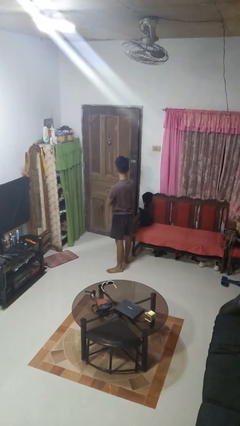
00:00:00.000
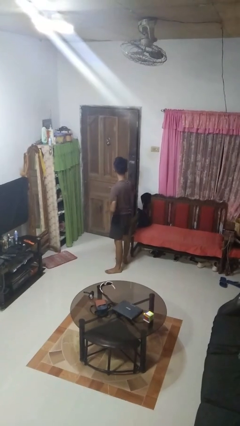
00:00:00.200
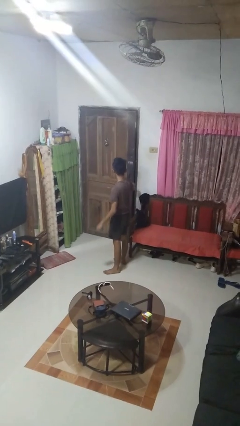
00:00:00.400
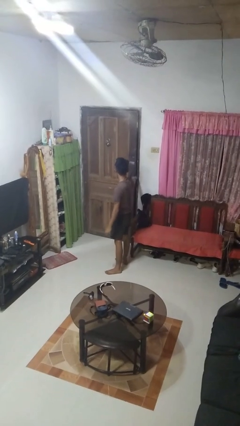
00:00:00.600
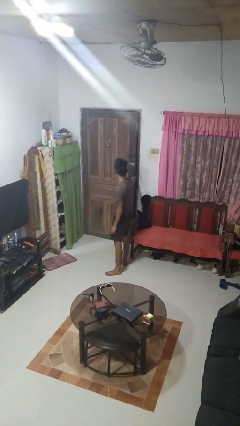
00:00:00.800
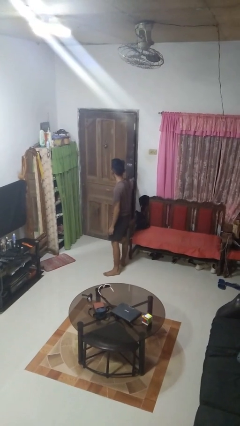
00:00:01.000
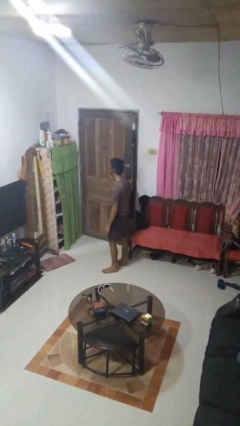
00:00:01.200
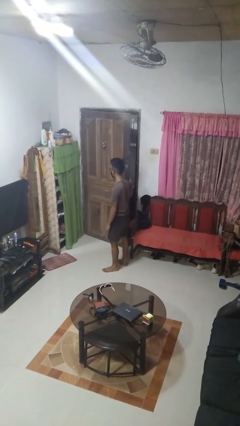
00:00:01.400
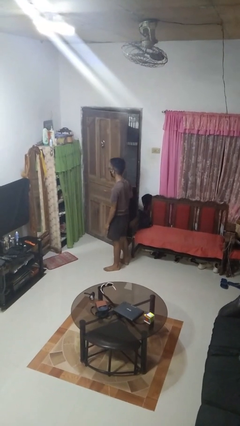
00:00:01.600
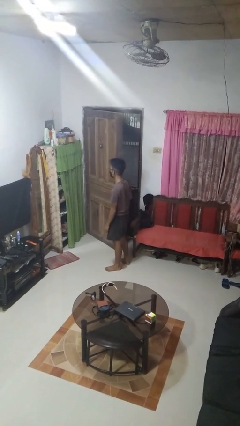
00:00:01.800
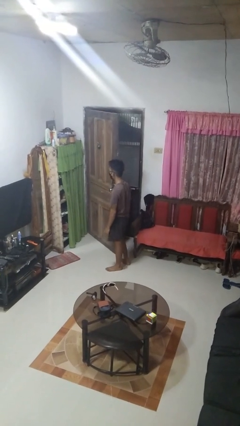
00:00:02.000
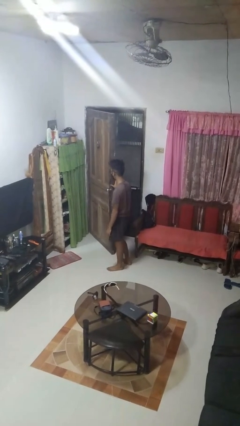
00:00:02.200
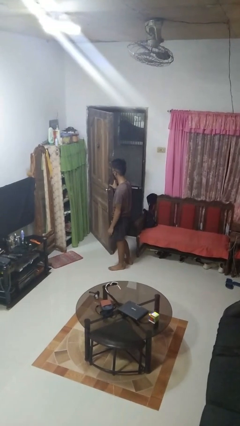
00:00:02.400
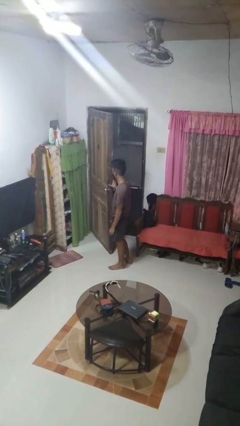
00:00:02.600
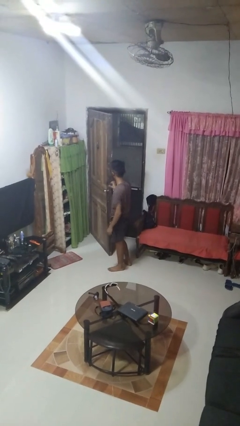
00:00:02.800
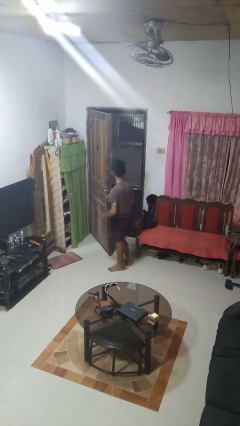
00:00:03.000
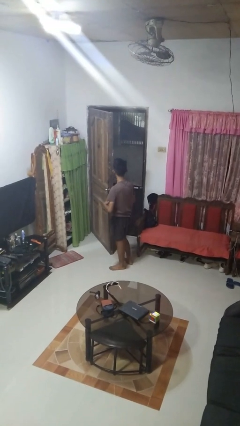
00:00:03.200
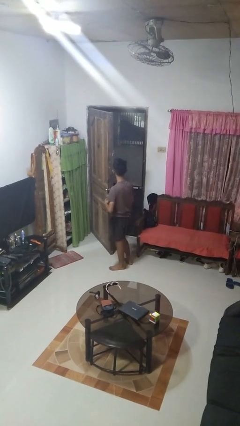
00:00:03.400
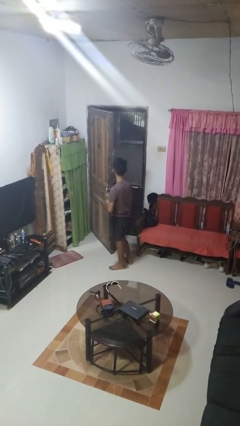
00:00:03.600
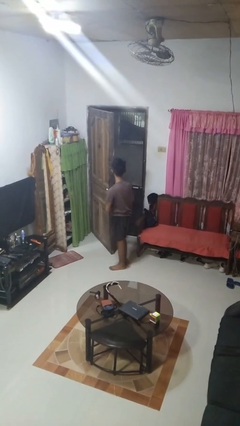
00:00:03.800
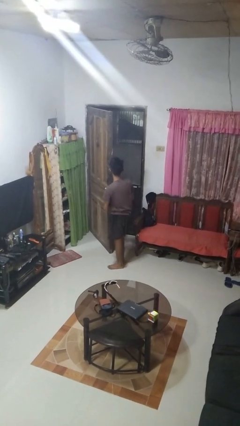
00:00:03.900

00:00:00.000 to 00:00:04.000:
person opens facility door

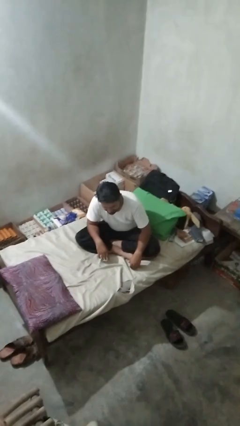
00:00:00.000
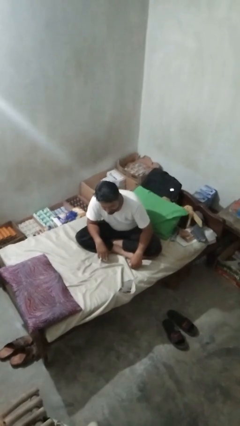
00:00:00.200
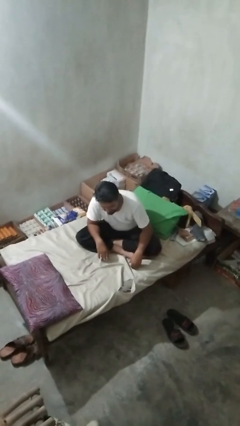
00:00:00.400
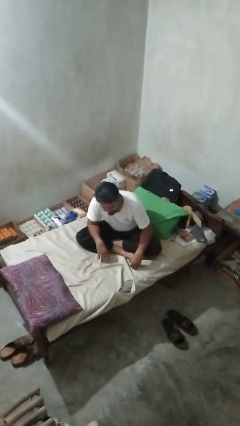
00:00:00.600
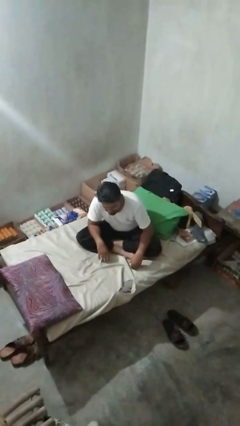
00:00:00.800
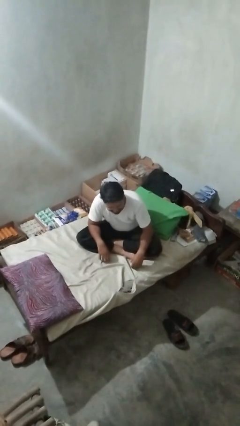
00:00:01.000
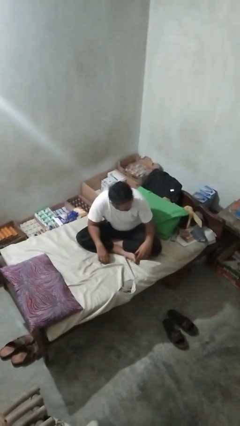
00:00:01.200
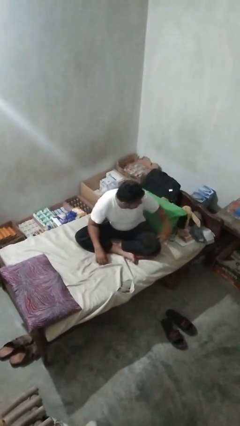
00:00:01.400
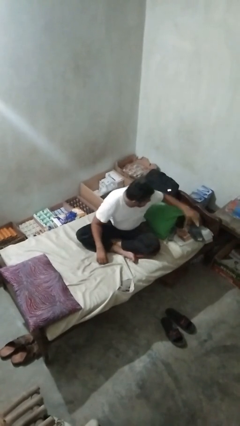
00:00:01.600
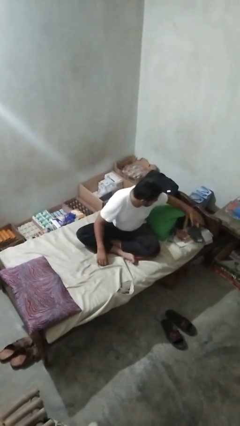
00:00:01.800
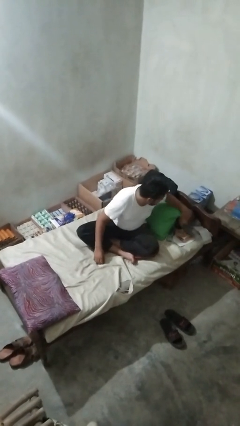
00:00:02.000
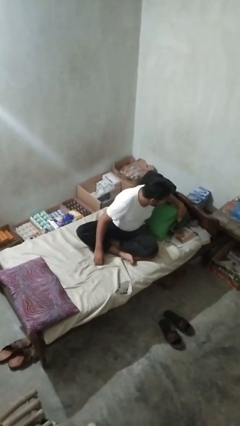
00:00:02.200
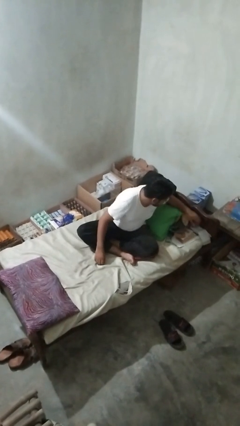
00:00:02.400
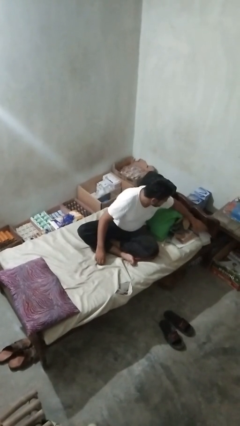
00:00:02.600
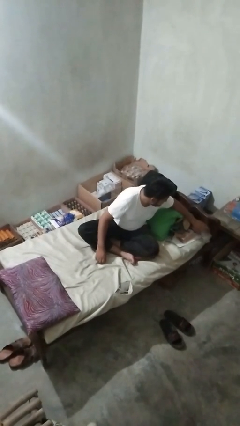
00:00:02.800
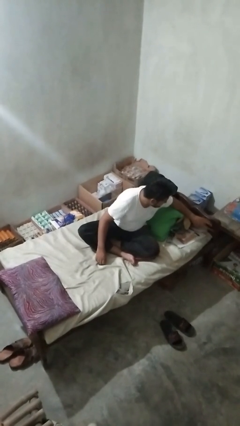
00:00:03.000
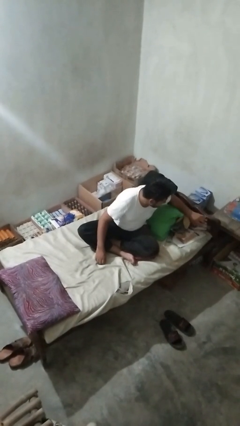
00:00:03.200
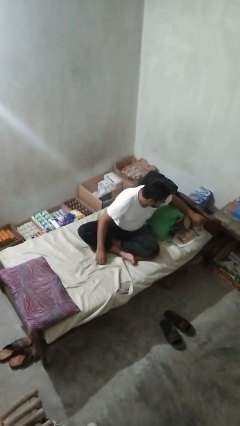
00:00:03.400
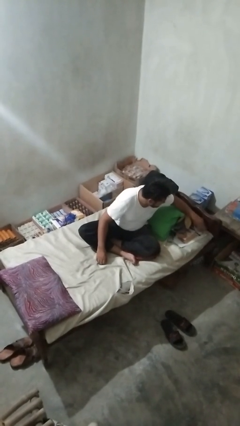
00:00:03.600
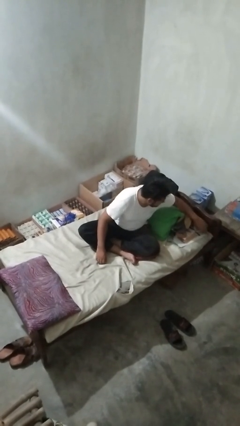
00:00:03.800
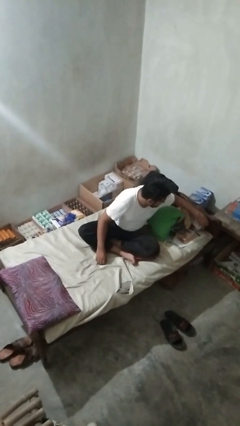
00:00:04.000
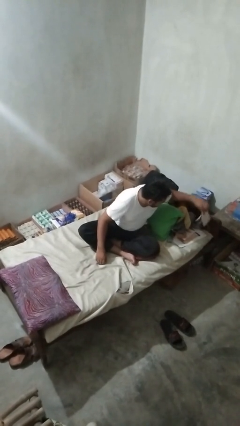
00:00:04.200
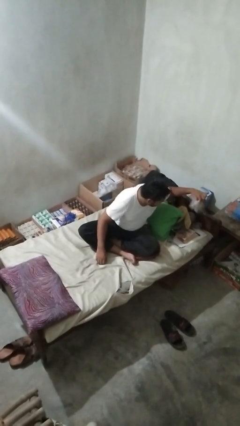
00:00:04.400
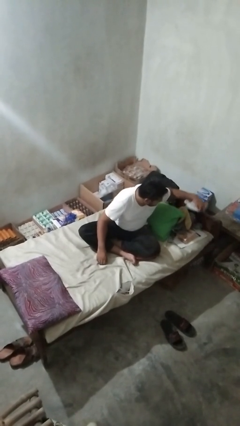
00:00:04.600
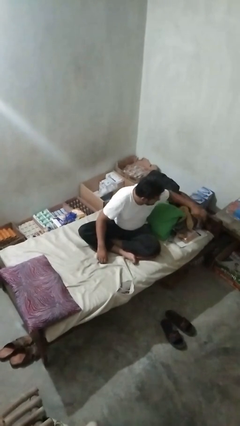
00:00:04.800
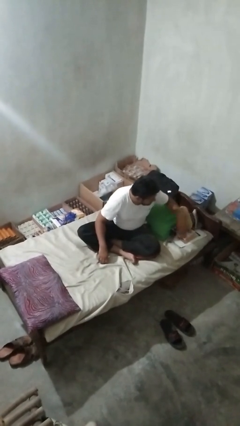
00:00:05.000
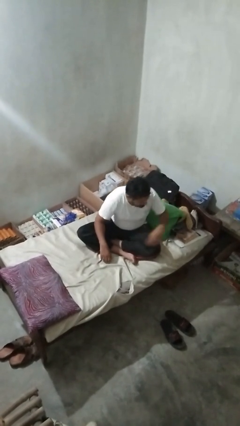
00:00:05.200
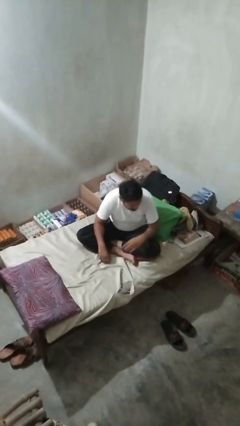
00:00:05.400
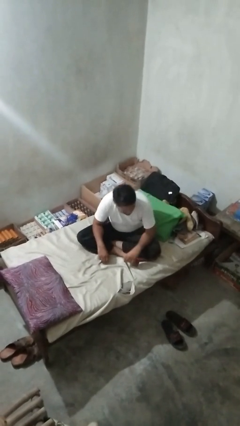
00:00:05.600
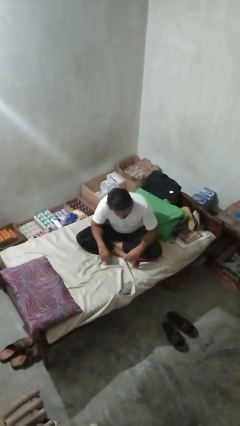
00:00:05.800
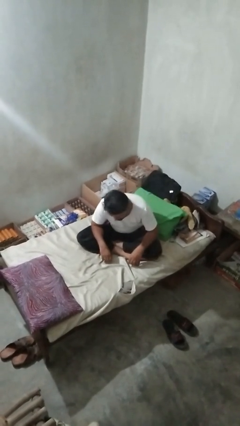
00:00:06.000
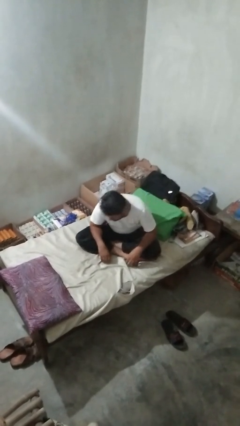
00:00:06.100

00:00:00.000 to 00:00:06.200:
person searches under bed

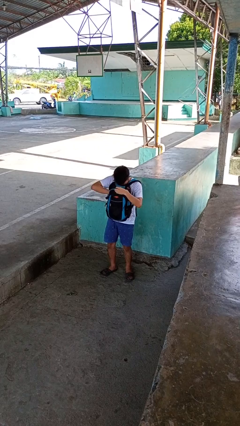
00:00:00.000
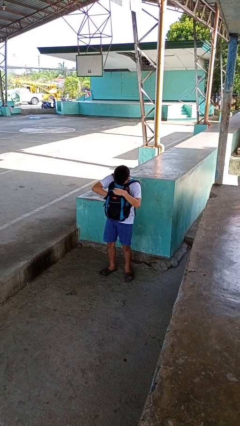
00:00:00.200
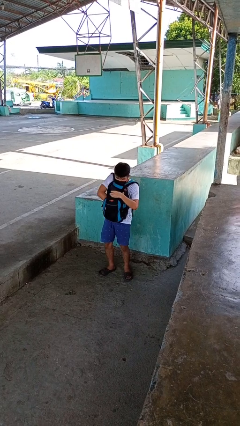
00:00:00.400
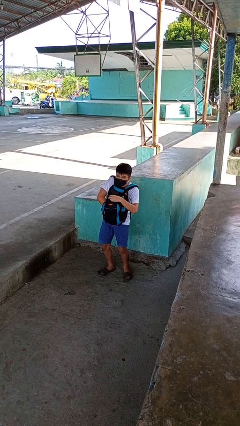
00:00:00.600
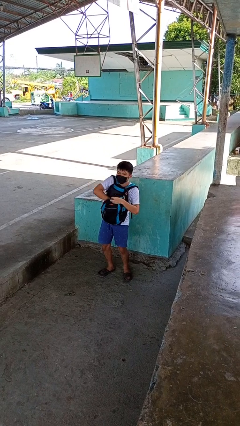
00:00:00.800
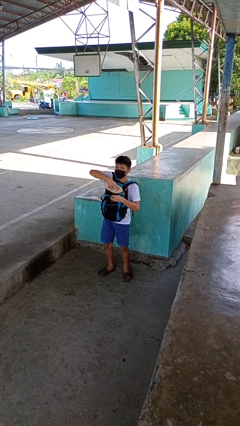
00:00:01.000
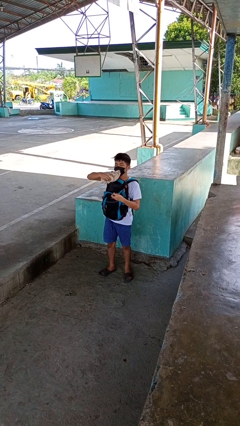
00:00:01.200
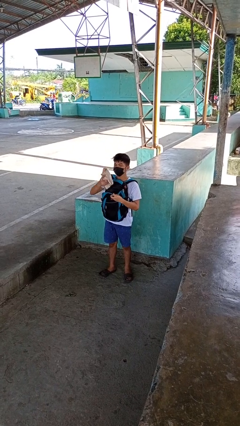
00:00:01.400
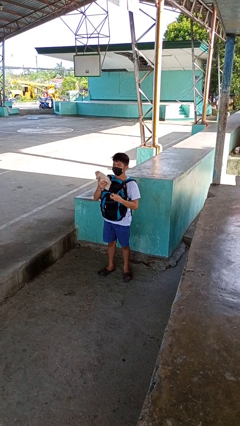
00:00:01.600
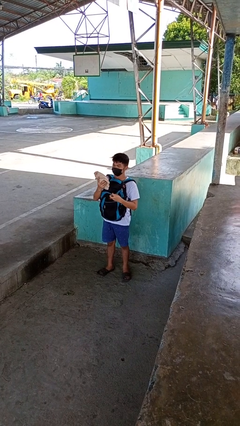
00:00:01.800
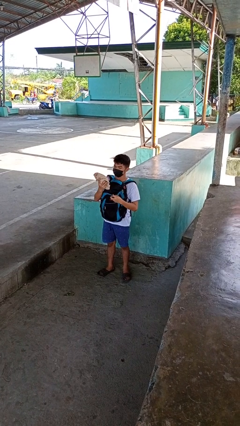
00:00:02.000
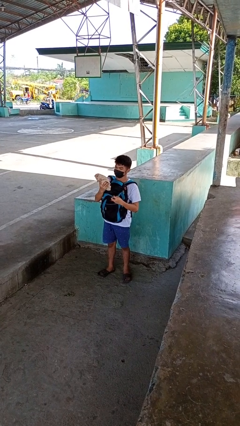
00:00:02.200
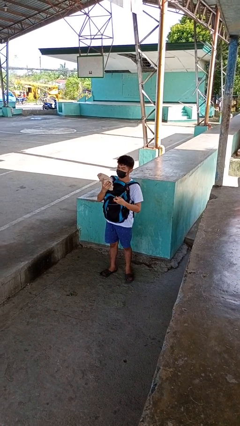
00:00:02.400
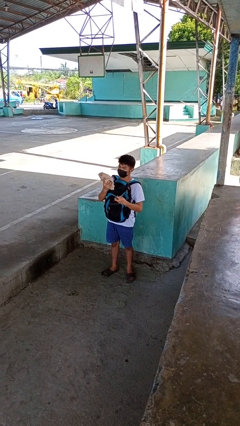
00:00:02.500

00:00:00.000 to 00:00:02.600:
person takes object from backpack

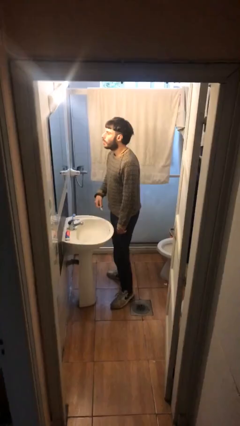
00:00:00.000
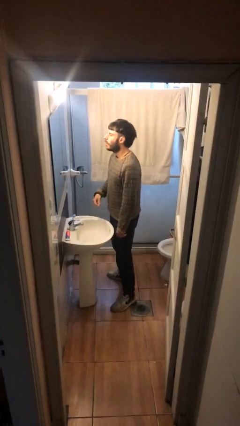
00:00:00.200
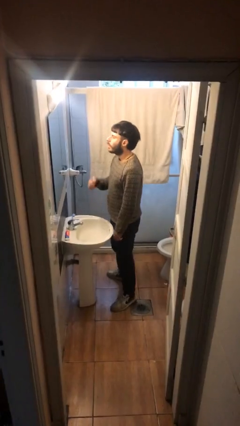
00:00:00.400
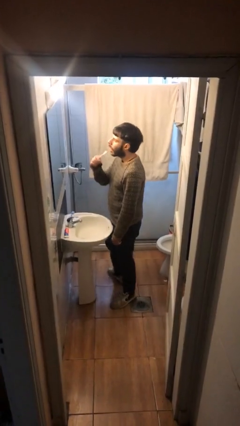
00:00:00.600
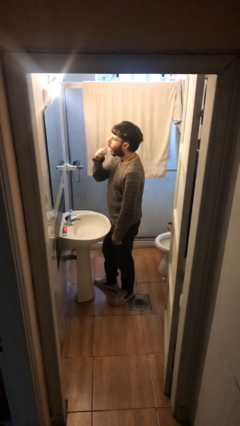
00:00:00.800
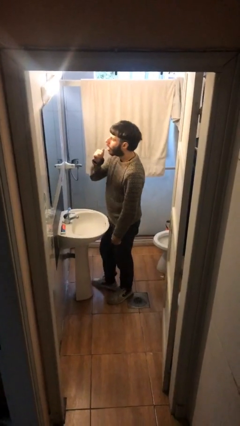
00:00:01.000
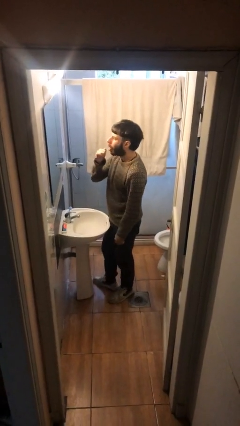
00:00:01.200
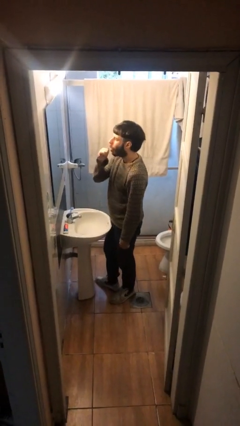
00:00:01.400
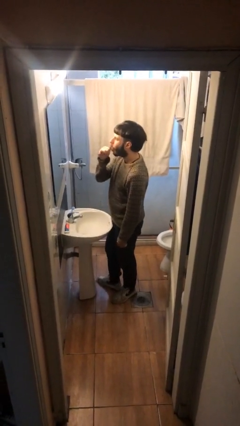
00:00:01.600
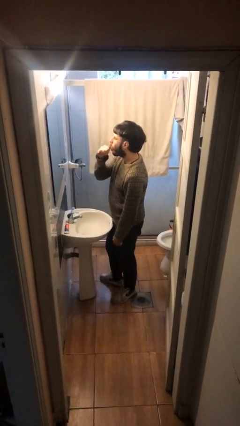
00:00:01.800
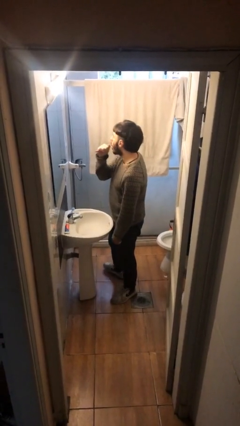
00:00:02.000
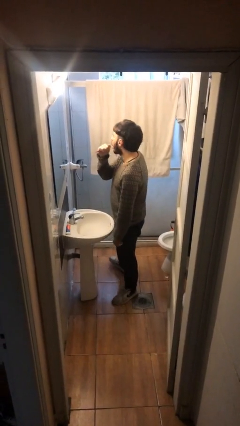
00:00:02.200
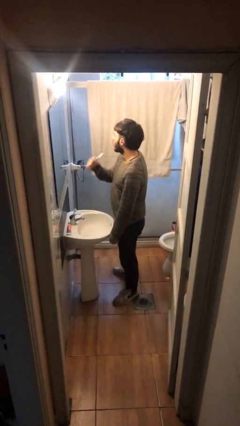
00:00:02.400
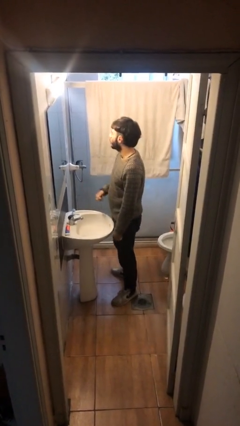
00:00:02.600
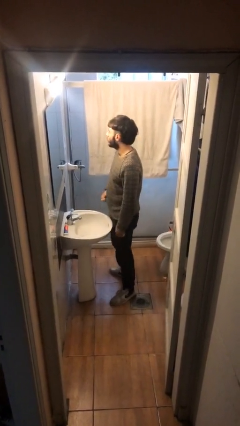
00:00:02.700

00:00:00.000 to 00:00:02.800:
person brushes teeth

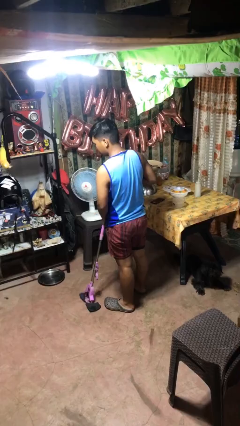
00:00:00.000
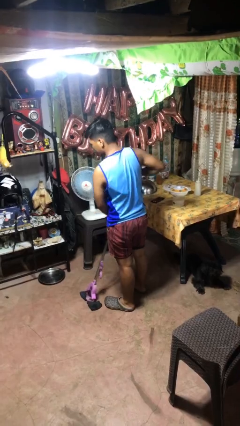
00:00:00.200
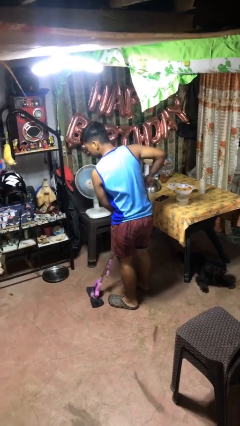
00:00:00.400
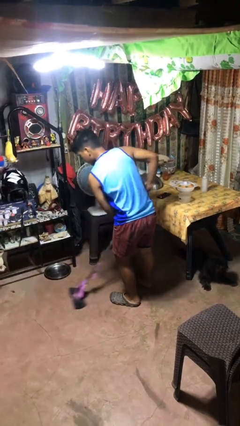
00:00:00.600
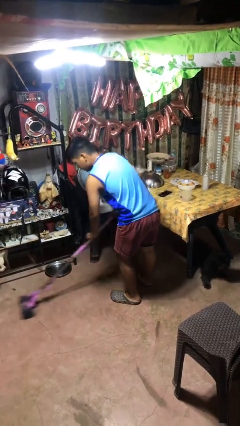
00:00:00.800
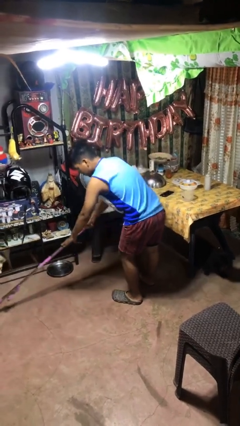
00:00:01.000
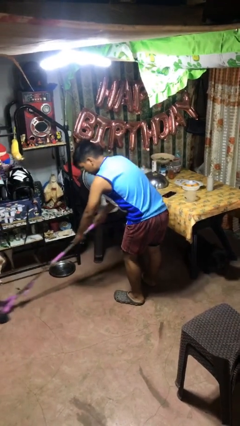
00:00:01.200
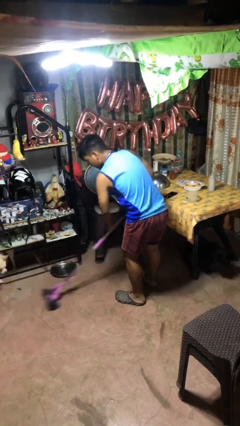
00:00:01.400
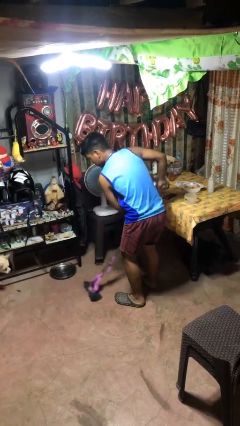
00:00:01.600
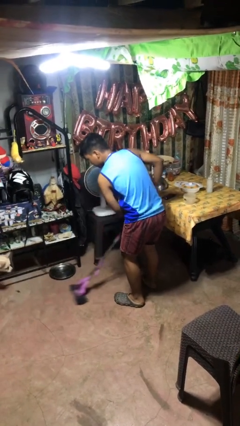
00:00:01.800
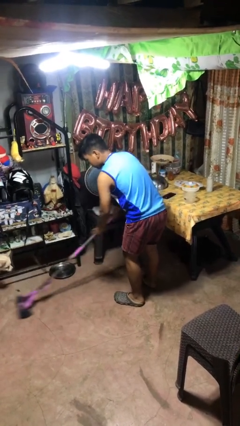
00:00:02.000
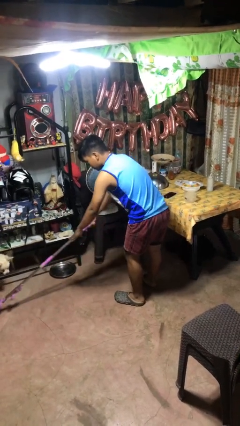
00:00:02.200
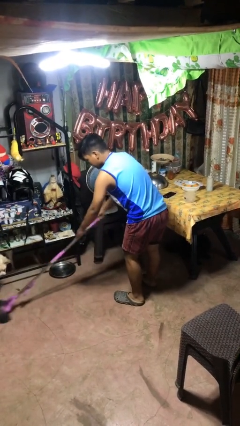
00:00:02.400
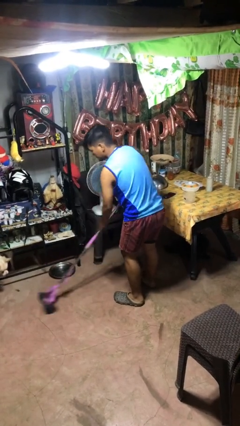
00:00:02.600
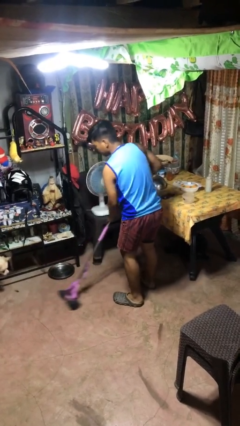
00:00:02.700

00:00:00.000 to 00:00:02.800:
person mops
